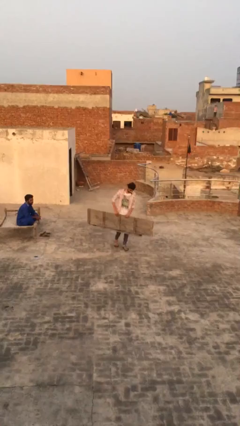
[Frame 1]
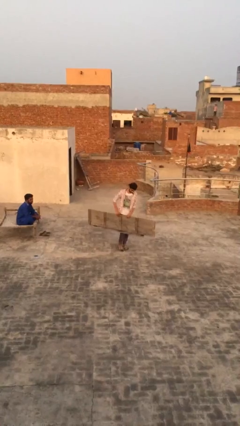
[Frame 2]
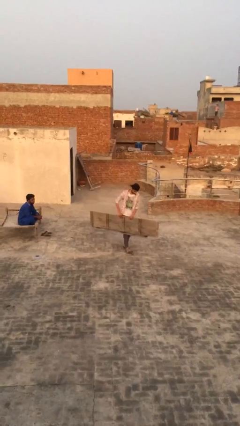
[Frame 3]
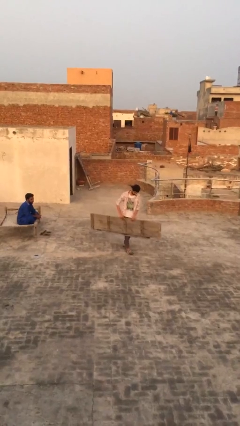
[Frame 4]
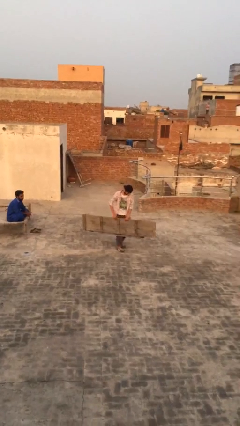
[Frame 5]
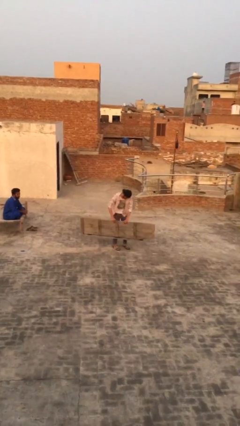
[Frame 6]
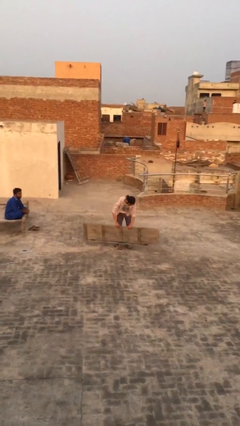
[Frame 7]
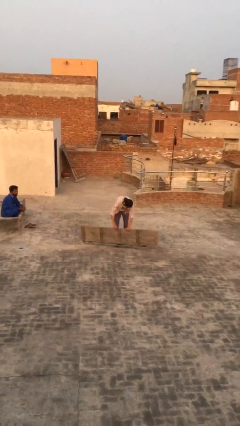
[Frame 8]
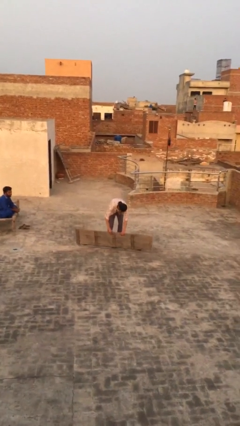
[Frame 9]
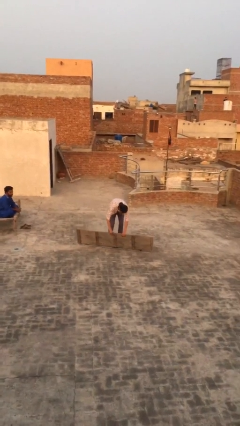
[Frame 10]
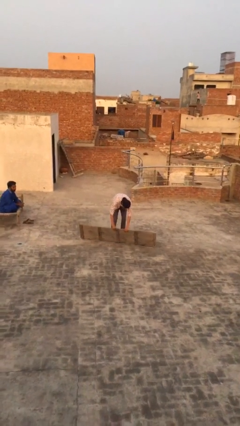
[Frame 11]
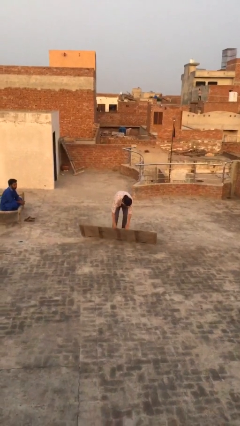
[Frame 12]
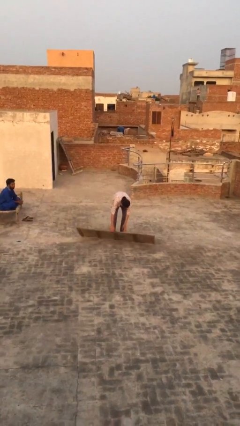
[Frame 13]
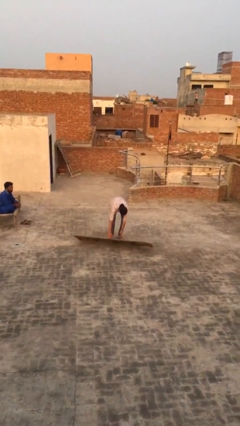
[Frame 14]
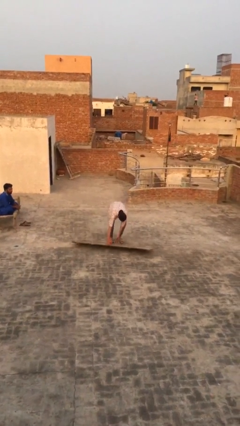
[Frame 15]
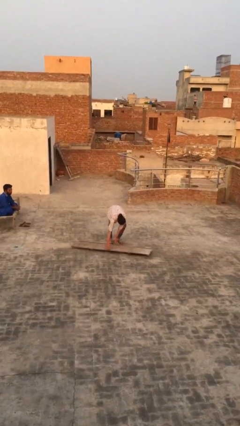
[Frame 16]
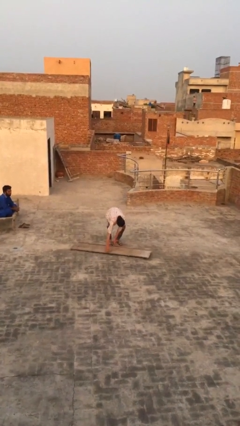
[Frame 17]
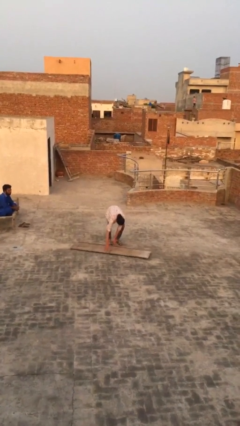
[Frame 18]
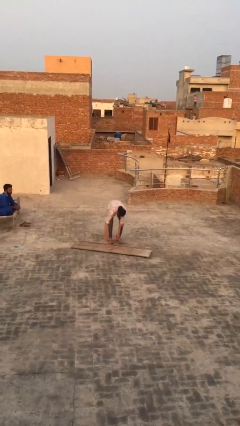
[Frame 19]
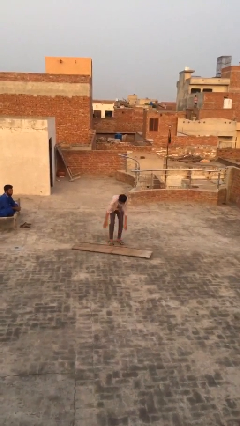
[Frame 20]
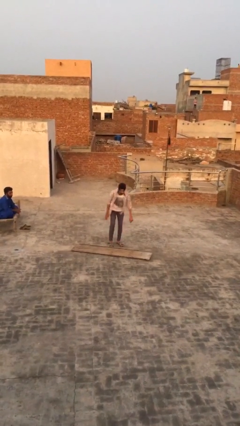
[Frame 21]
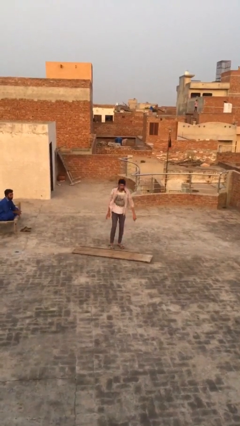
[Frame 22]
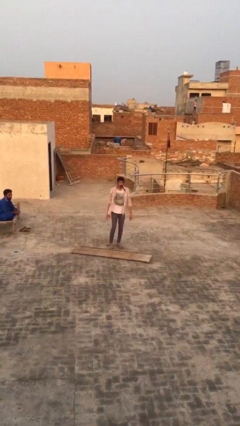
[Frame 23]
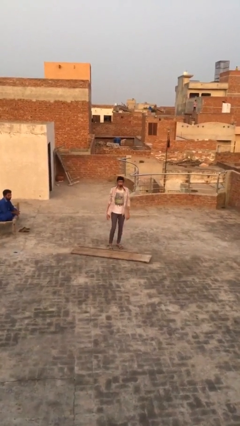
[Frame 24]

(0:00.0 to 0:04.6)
person puts down object on floor

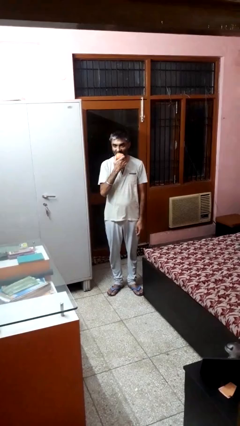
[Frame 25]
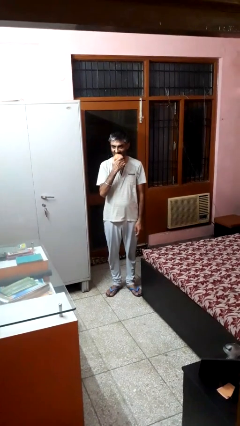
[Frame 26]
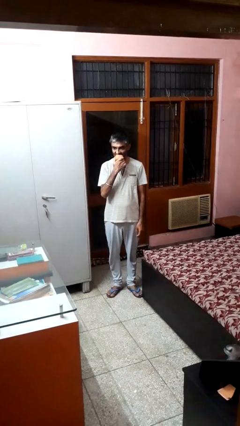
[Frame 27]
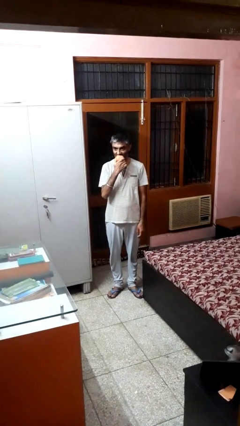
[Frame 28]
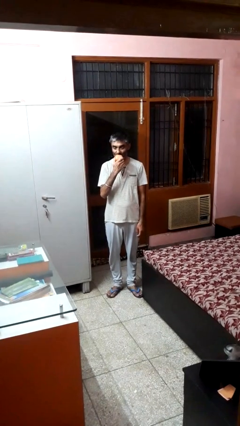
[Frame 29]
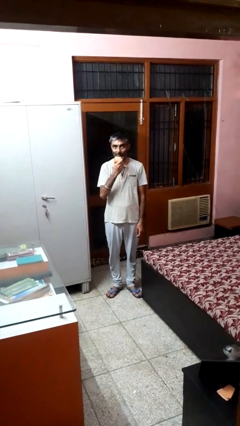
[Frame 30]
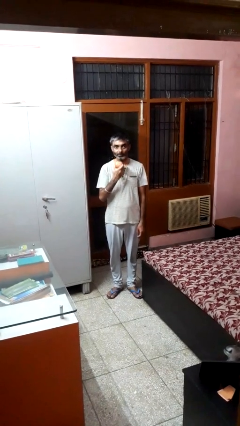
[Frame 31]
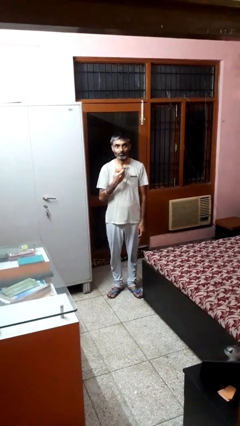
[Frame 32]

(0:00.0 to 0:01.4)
person eats apple

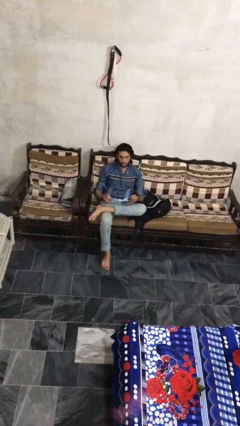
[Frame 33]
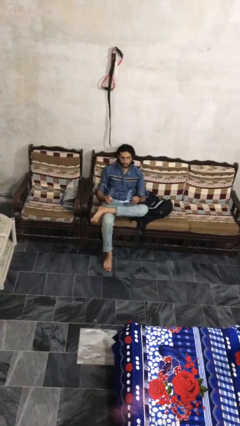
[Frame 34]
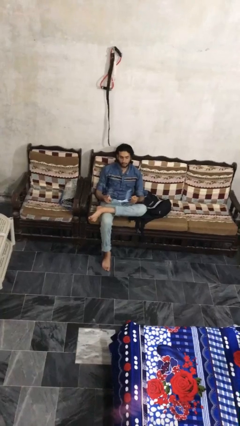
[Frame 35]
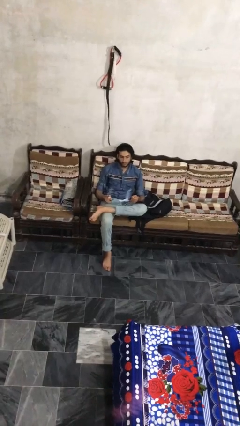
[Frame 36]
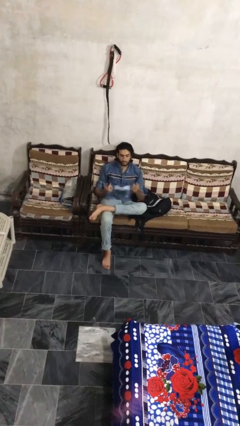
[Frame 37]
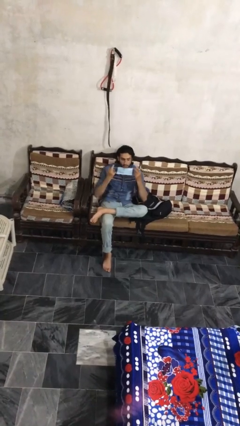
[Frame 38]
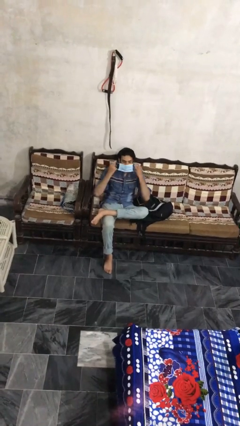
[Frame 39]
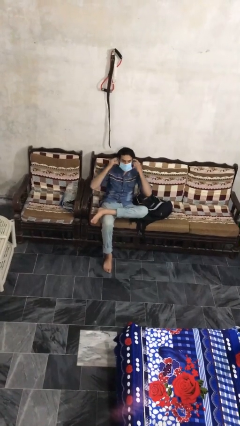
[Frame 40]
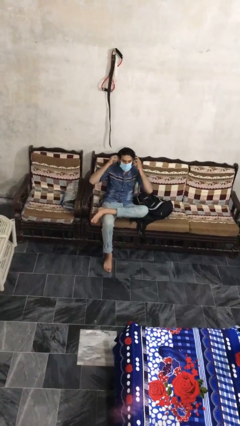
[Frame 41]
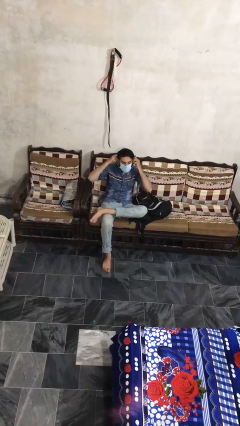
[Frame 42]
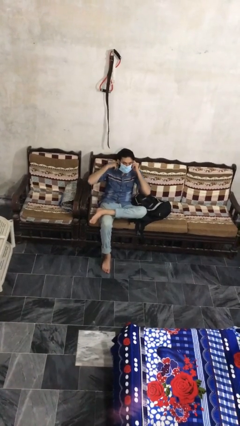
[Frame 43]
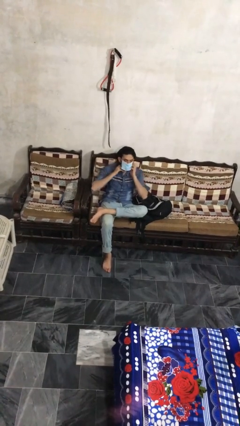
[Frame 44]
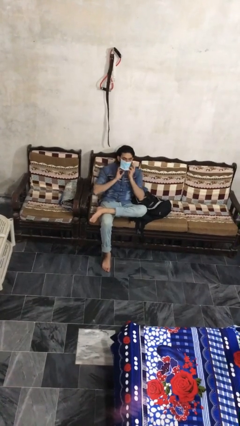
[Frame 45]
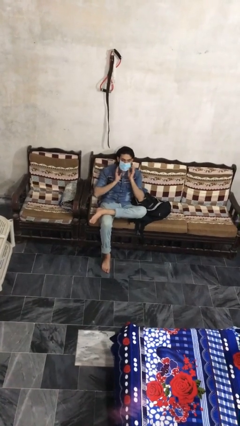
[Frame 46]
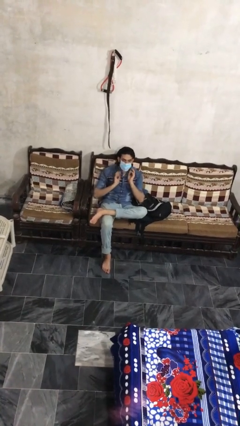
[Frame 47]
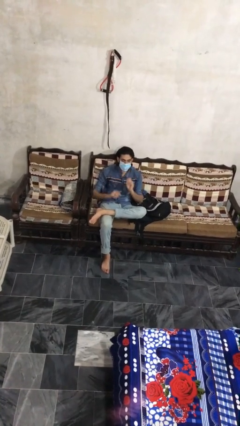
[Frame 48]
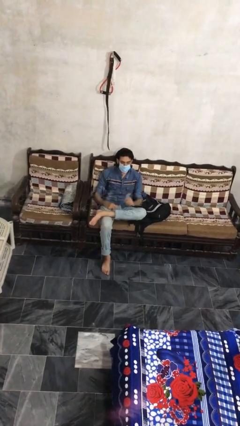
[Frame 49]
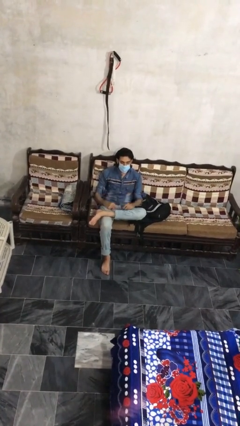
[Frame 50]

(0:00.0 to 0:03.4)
person puts on facemask

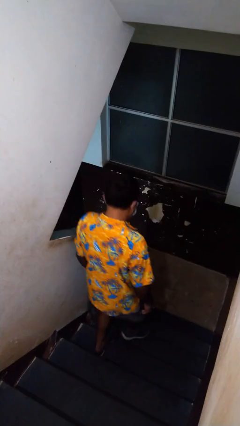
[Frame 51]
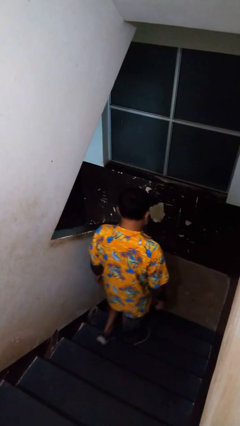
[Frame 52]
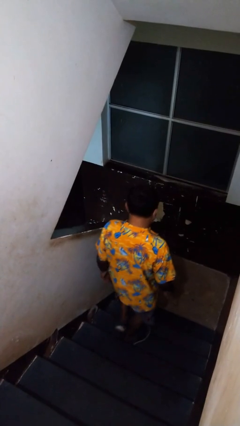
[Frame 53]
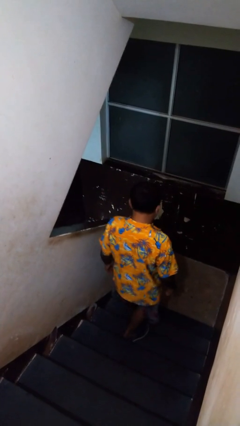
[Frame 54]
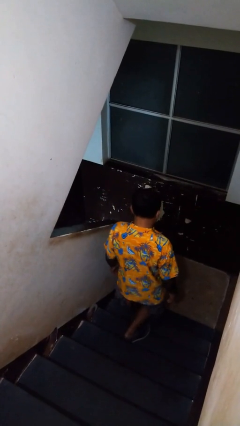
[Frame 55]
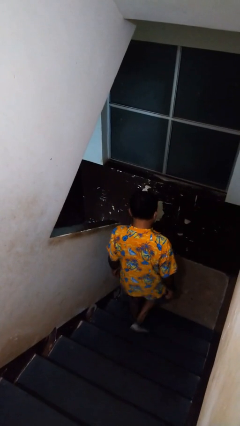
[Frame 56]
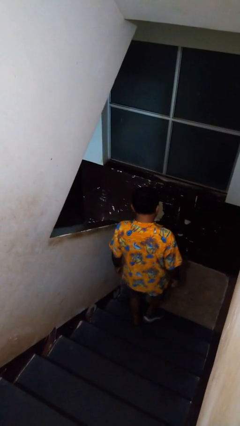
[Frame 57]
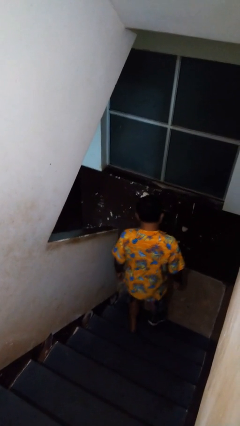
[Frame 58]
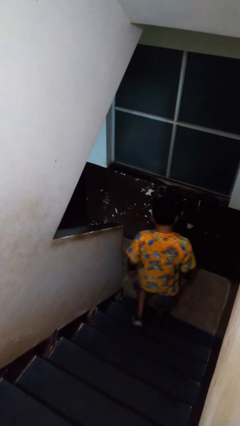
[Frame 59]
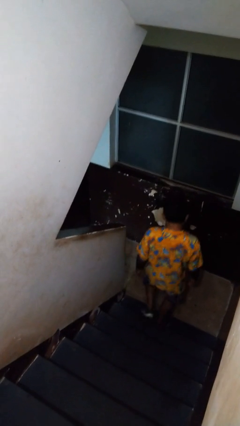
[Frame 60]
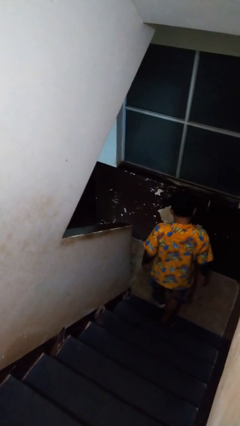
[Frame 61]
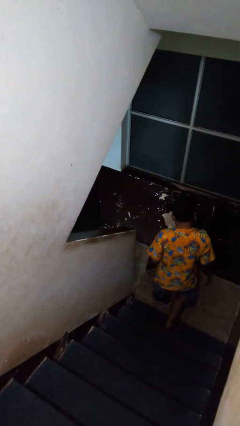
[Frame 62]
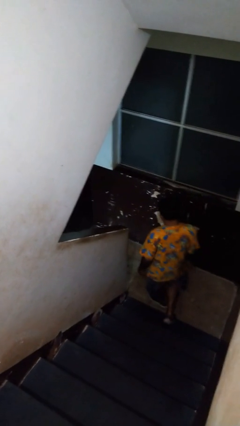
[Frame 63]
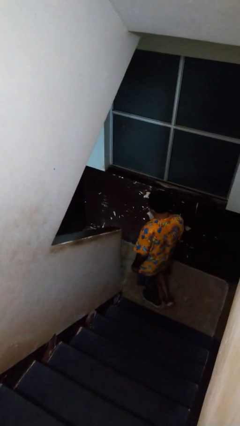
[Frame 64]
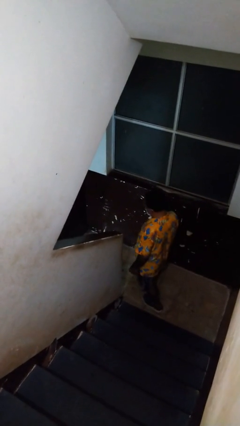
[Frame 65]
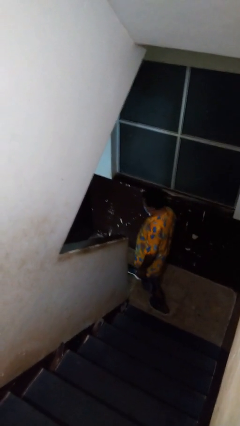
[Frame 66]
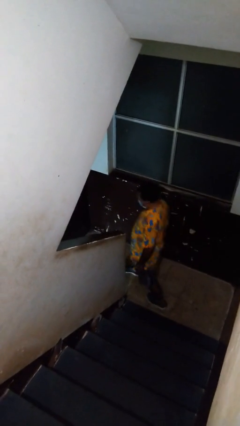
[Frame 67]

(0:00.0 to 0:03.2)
person climbs down stairs

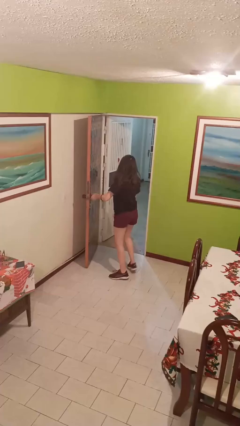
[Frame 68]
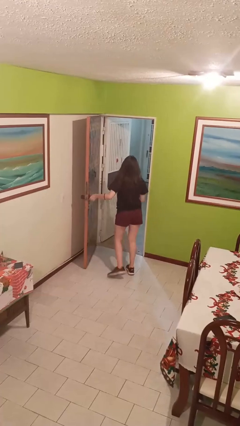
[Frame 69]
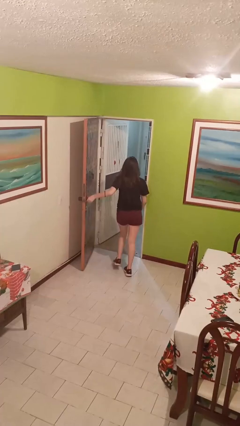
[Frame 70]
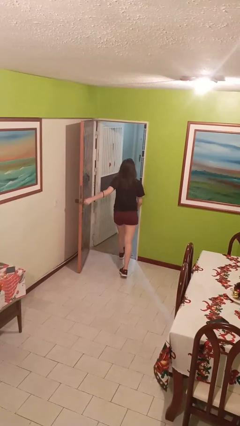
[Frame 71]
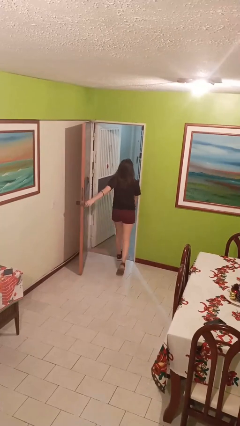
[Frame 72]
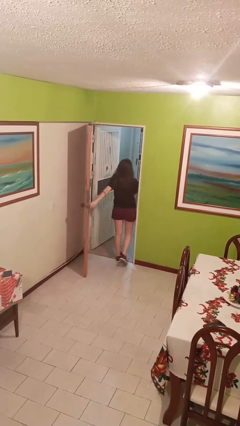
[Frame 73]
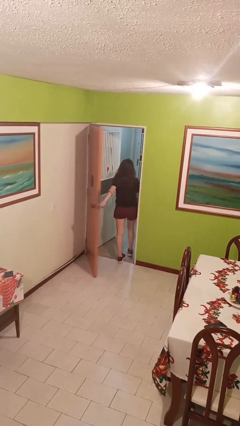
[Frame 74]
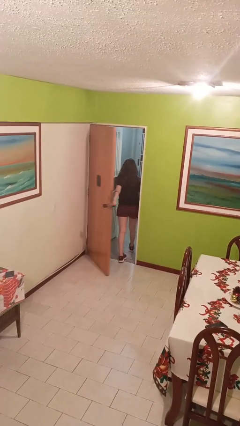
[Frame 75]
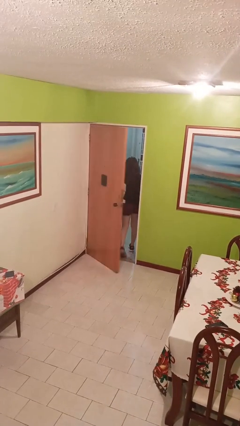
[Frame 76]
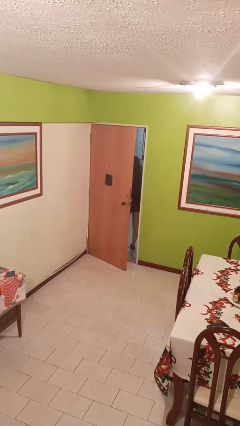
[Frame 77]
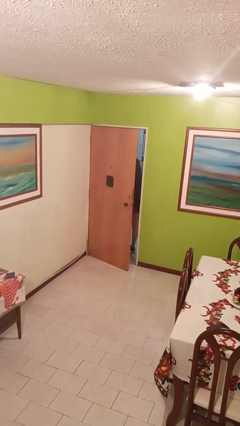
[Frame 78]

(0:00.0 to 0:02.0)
person closes facility door

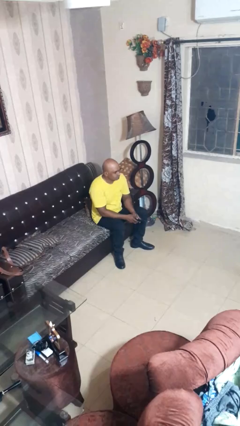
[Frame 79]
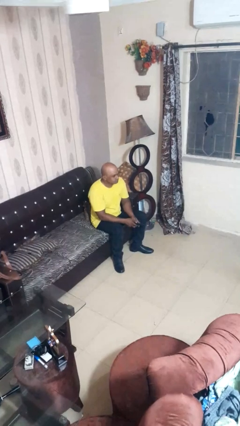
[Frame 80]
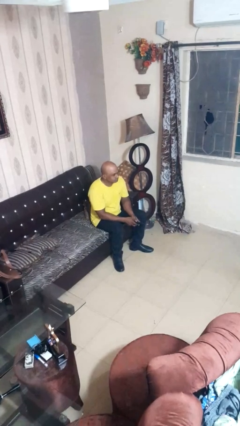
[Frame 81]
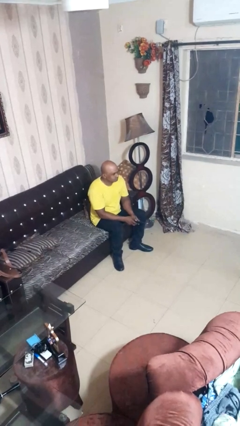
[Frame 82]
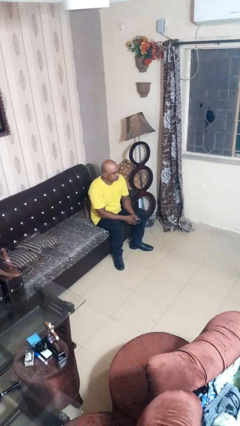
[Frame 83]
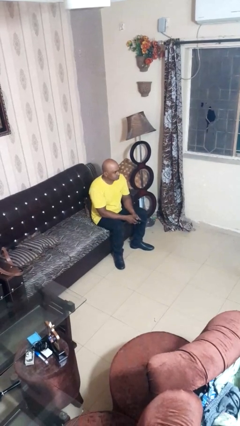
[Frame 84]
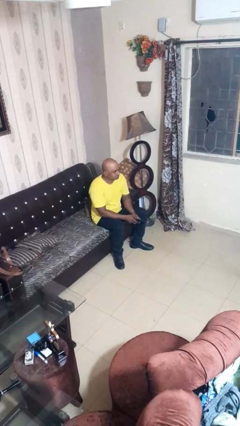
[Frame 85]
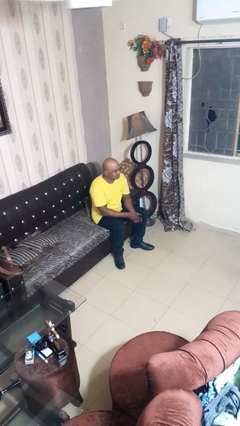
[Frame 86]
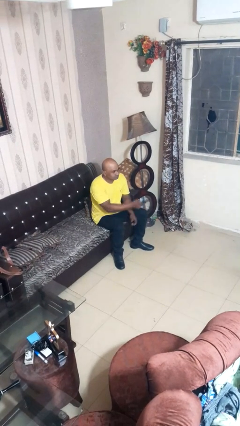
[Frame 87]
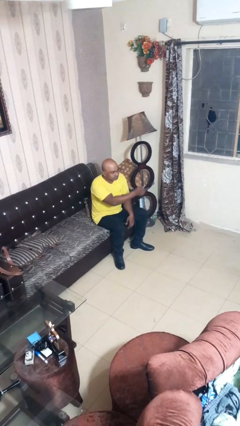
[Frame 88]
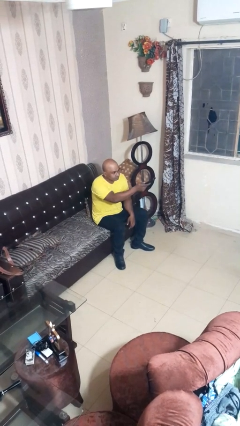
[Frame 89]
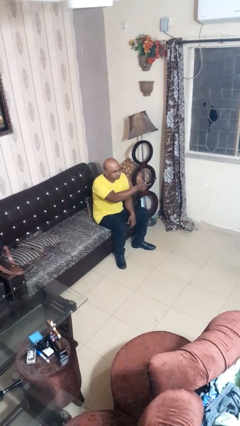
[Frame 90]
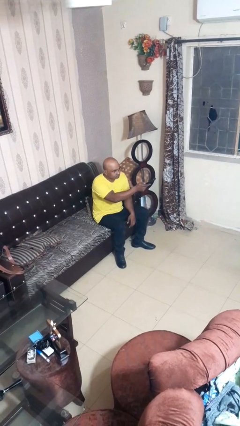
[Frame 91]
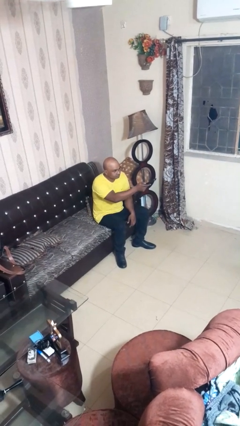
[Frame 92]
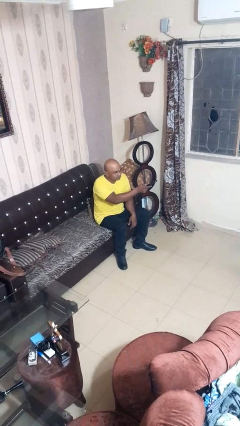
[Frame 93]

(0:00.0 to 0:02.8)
person uses television remote

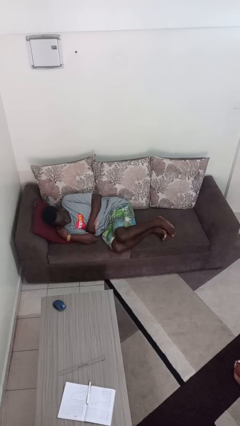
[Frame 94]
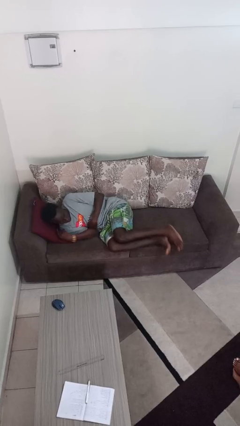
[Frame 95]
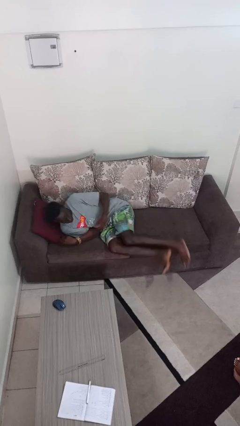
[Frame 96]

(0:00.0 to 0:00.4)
person stands up
